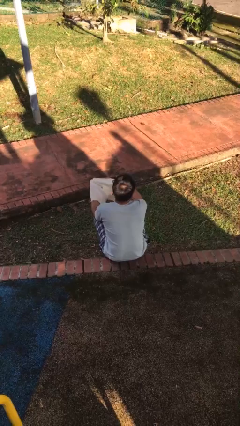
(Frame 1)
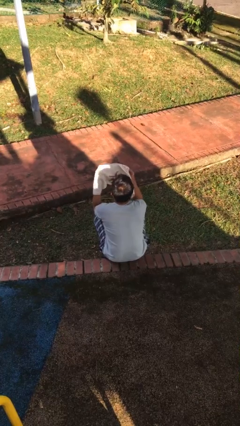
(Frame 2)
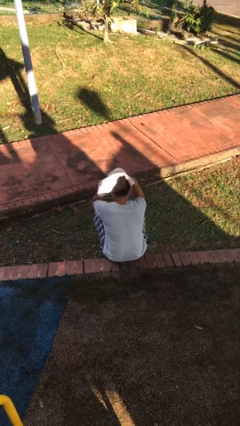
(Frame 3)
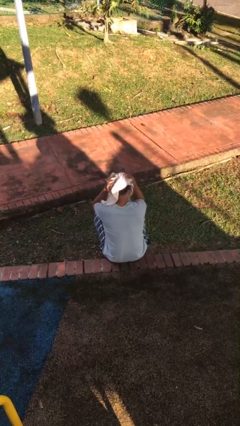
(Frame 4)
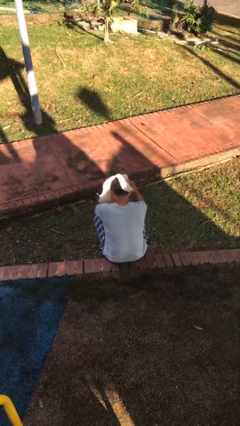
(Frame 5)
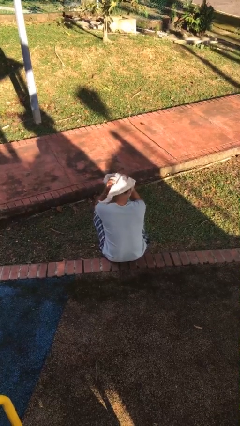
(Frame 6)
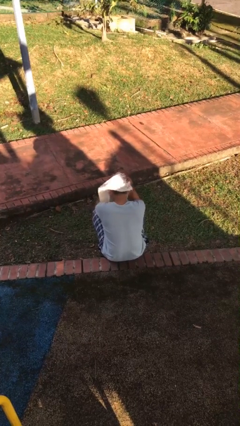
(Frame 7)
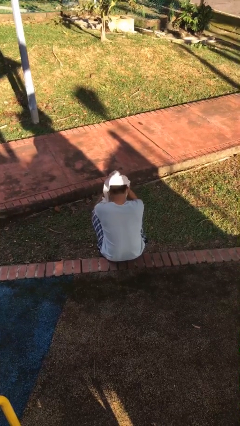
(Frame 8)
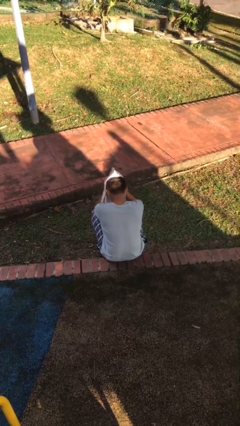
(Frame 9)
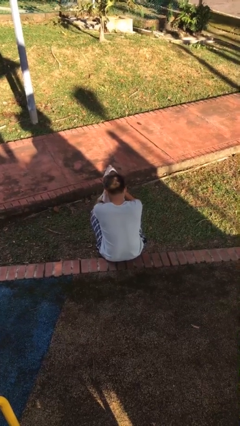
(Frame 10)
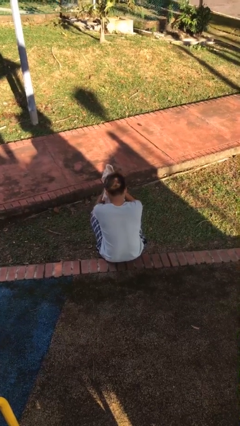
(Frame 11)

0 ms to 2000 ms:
person dries hair with towel

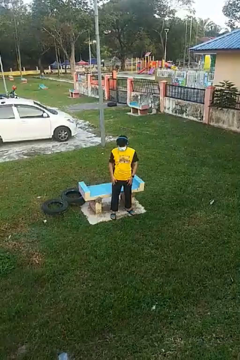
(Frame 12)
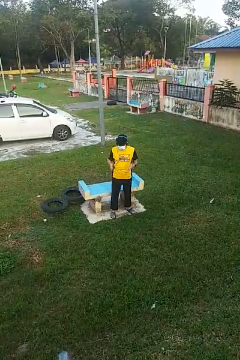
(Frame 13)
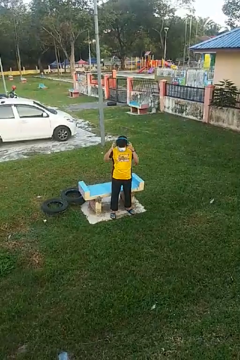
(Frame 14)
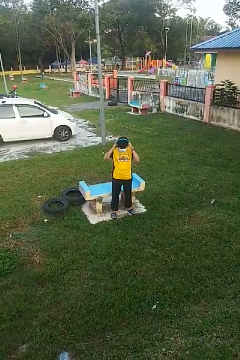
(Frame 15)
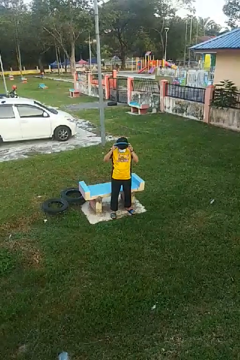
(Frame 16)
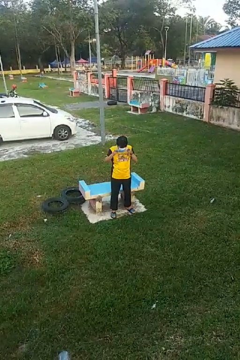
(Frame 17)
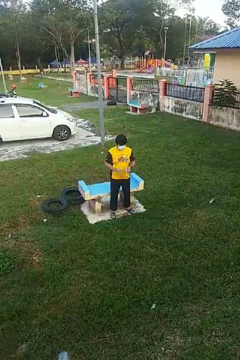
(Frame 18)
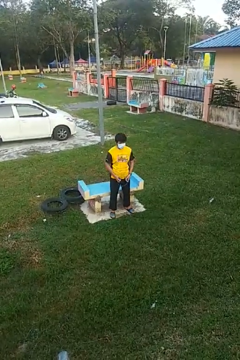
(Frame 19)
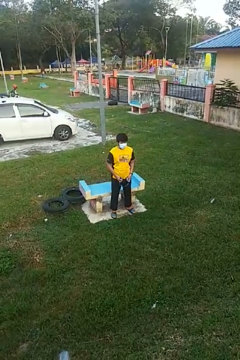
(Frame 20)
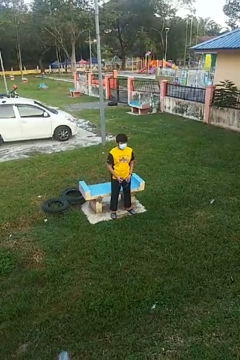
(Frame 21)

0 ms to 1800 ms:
person takes off headphones

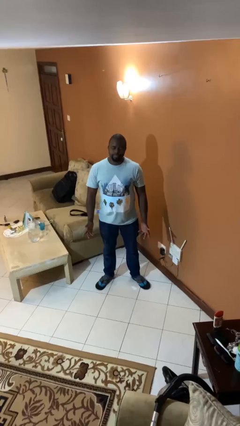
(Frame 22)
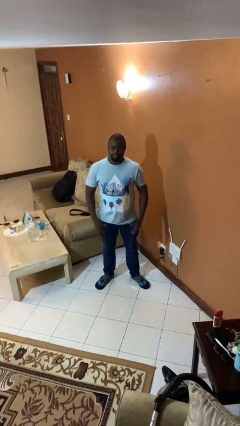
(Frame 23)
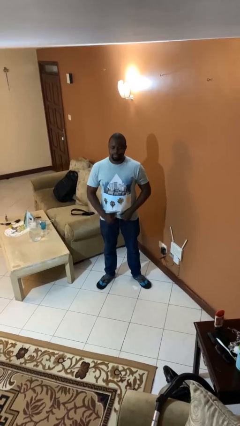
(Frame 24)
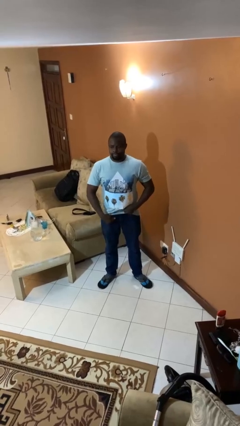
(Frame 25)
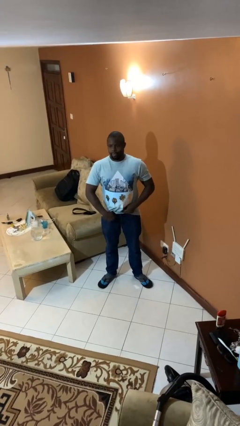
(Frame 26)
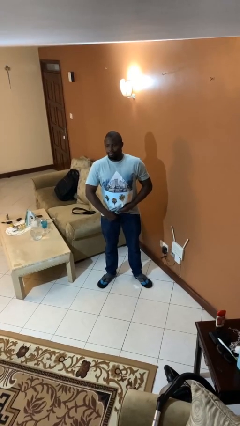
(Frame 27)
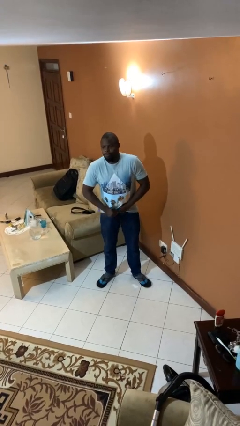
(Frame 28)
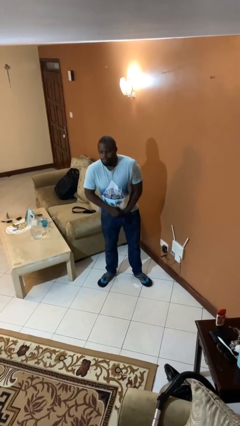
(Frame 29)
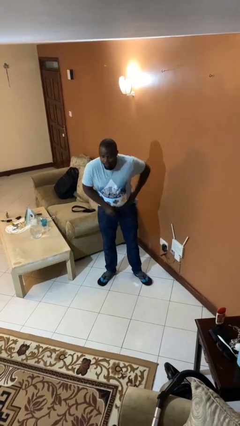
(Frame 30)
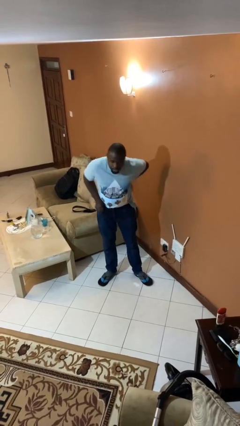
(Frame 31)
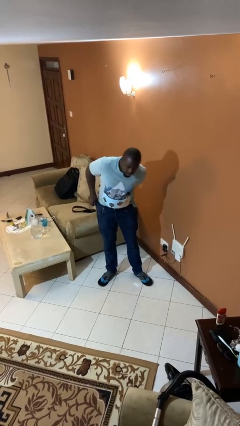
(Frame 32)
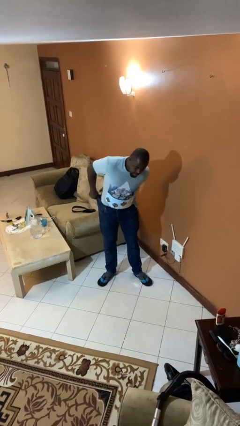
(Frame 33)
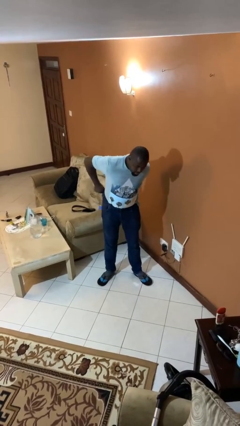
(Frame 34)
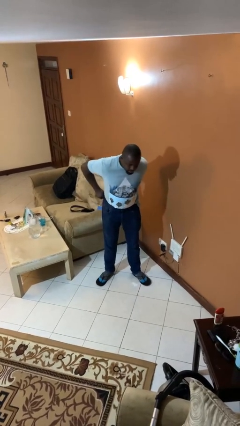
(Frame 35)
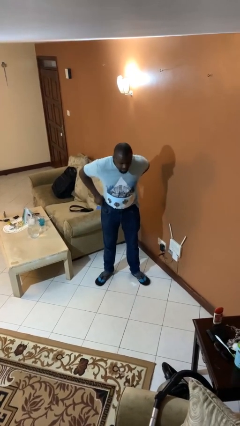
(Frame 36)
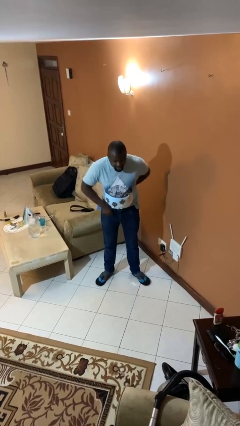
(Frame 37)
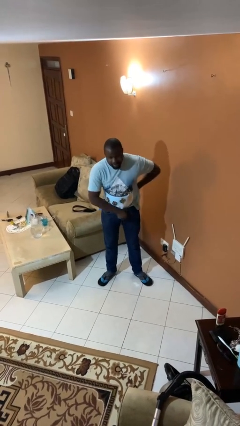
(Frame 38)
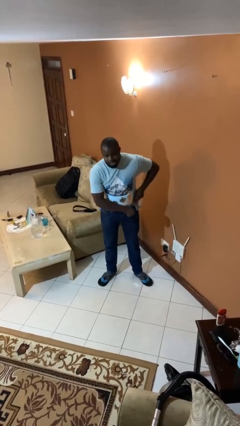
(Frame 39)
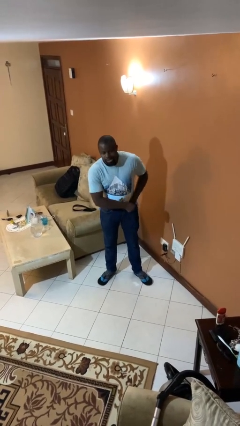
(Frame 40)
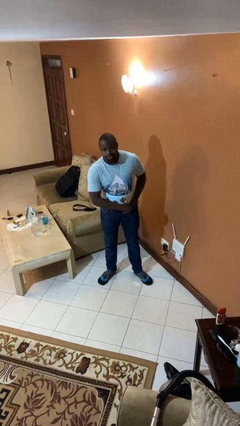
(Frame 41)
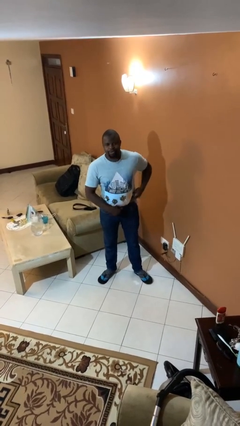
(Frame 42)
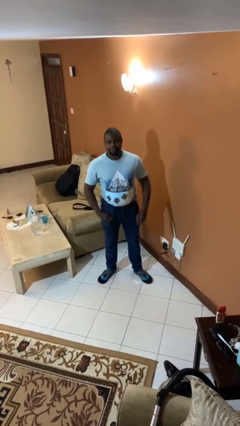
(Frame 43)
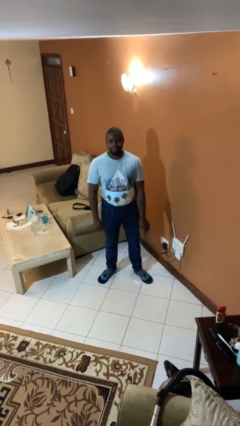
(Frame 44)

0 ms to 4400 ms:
person tucks in shirt

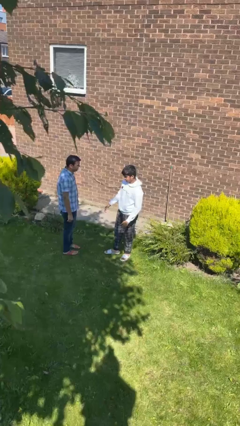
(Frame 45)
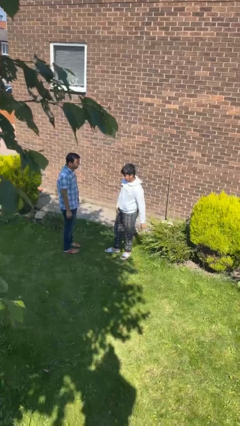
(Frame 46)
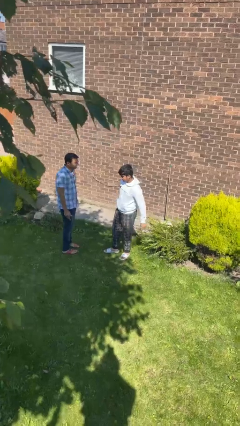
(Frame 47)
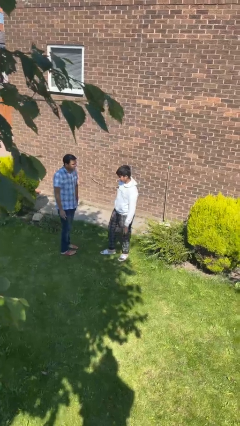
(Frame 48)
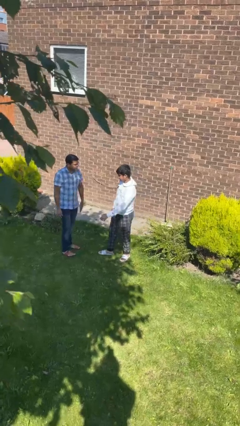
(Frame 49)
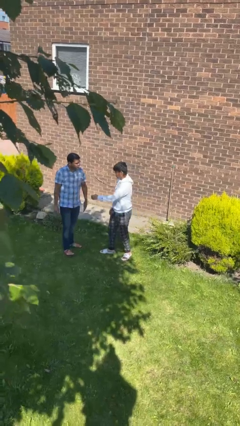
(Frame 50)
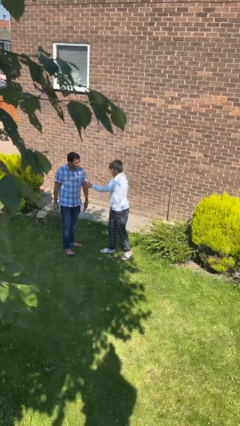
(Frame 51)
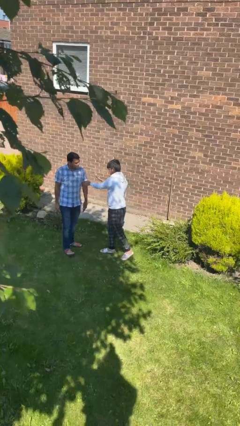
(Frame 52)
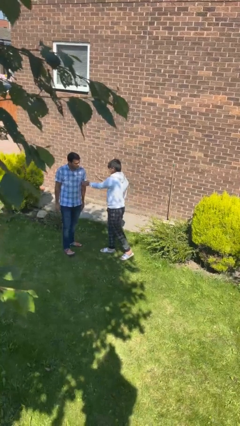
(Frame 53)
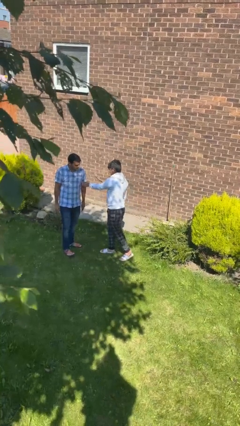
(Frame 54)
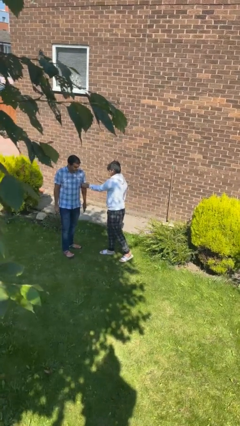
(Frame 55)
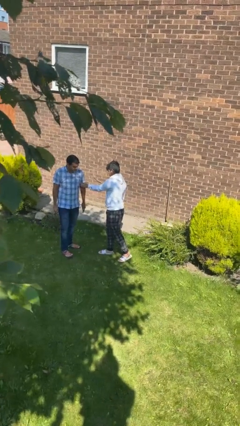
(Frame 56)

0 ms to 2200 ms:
person grabs person by bicep

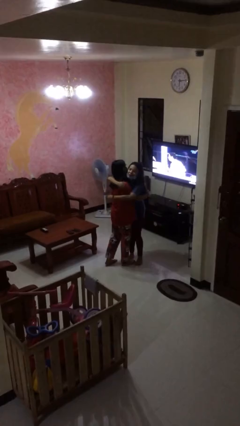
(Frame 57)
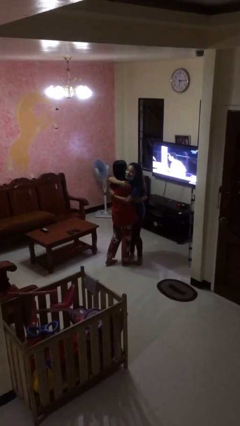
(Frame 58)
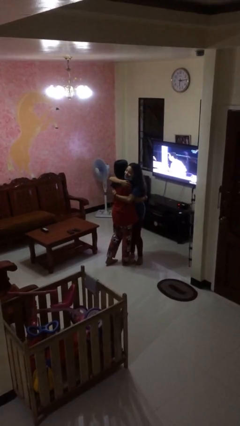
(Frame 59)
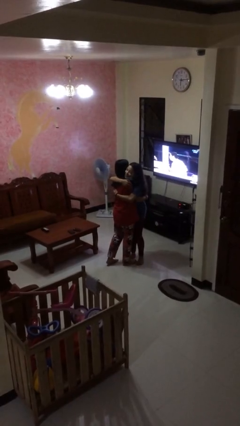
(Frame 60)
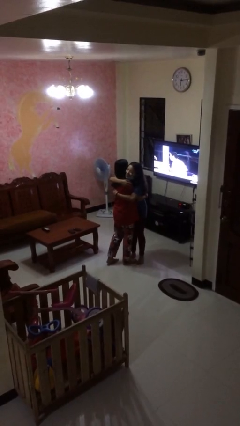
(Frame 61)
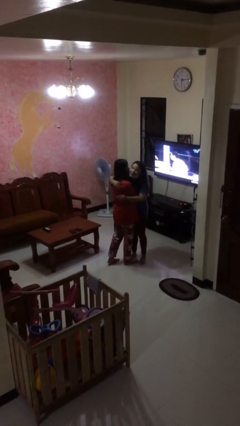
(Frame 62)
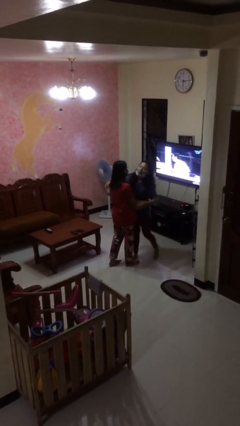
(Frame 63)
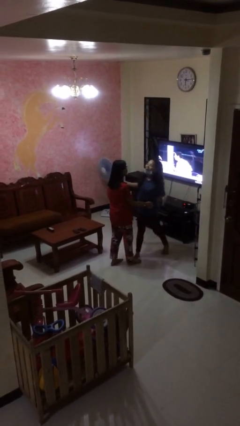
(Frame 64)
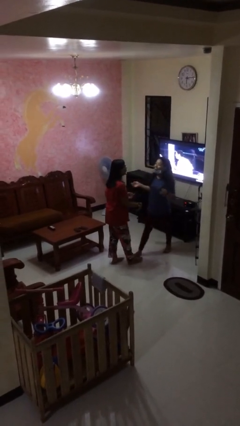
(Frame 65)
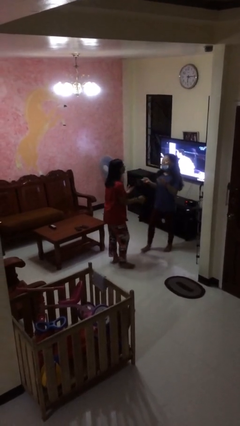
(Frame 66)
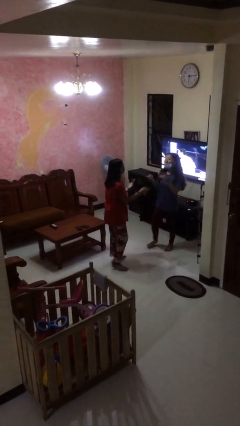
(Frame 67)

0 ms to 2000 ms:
person embraces person

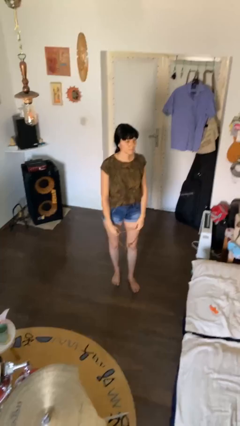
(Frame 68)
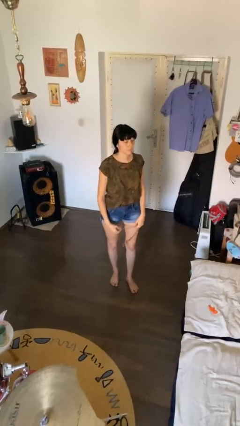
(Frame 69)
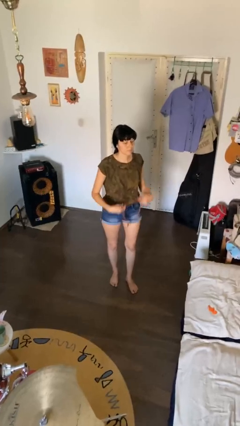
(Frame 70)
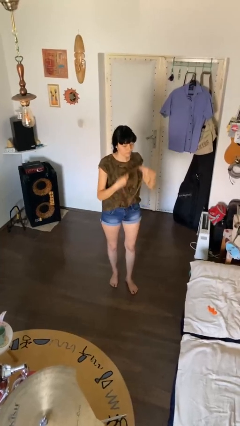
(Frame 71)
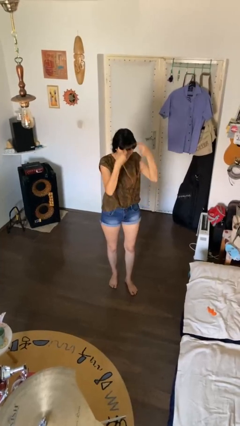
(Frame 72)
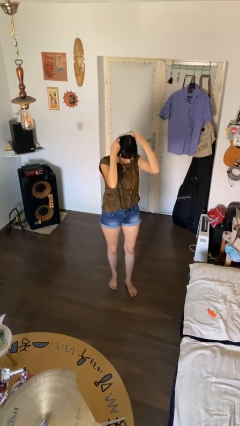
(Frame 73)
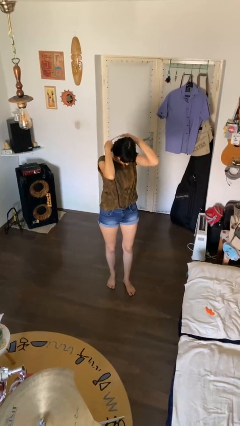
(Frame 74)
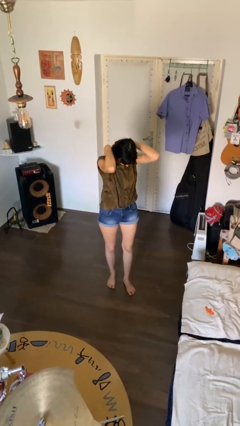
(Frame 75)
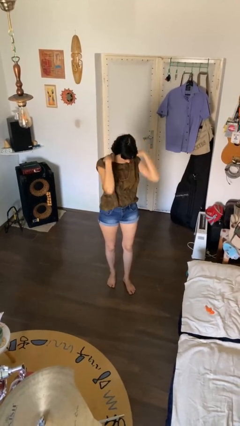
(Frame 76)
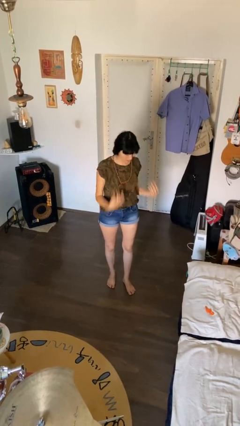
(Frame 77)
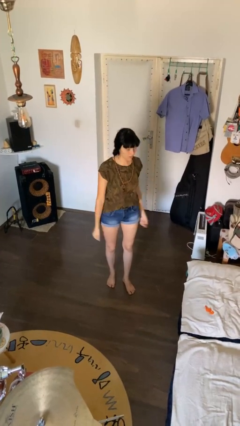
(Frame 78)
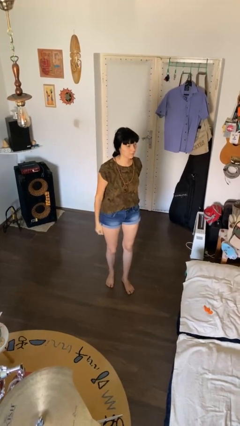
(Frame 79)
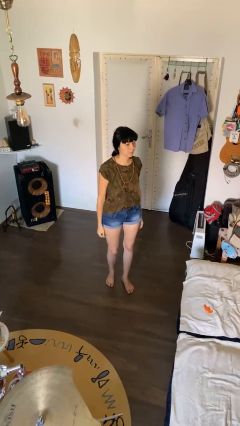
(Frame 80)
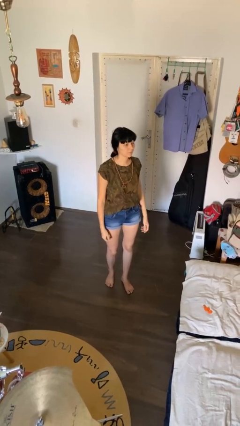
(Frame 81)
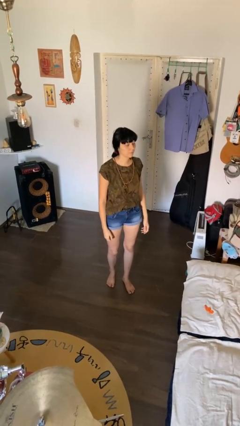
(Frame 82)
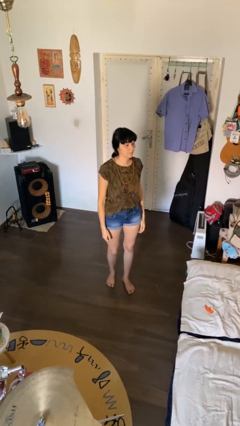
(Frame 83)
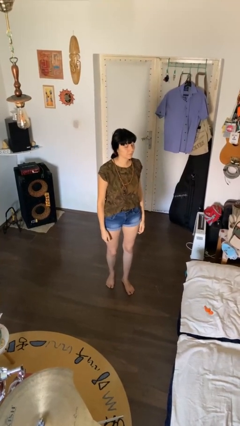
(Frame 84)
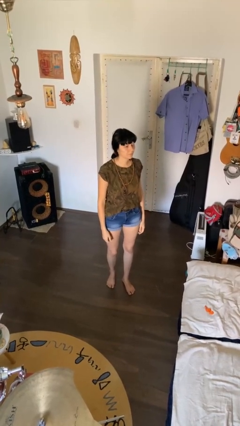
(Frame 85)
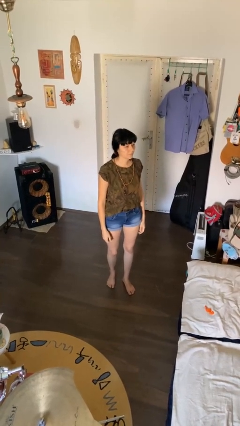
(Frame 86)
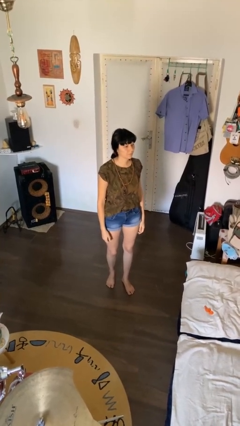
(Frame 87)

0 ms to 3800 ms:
person puts on necklace

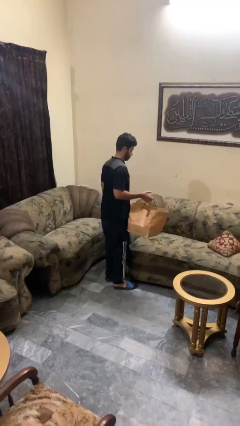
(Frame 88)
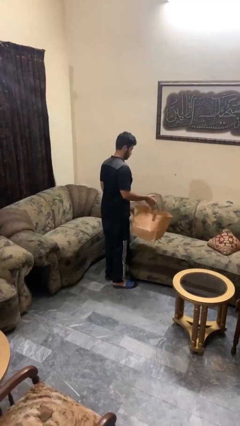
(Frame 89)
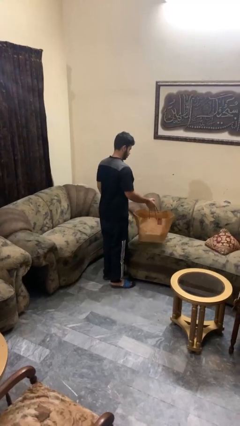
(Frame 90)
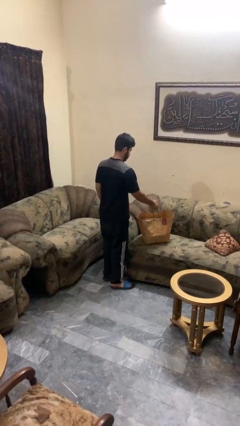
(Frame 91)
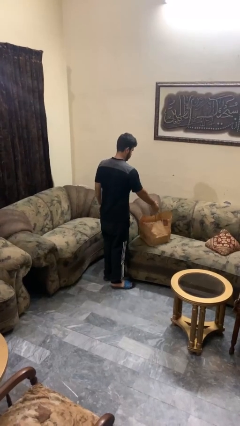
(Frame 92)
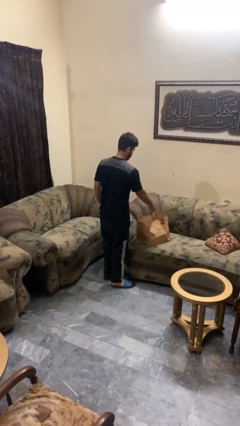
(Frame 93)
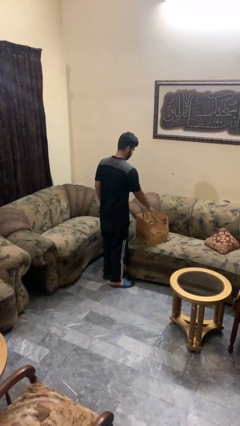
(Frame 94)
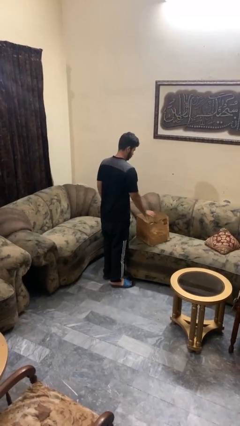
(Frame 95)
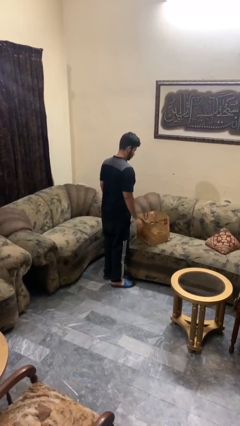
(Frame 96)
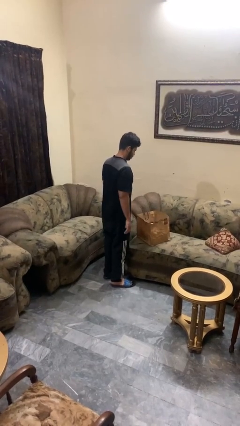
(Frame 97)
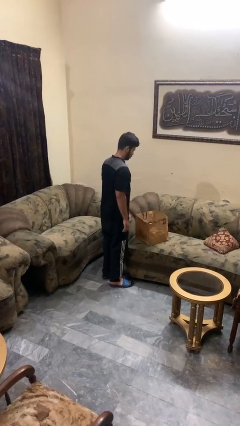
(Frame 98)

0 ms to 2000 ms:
person puts down object on couch
